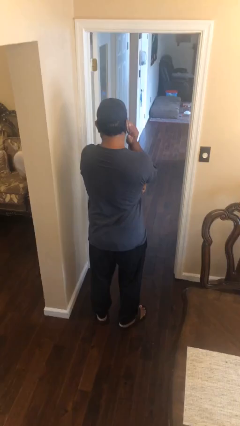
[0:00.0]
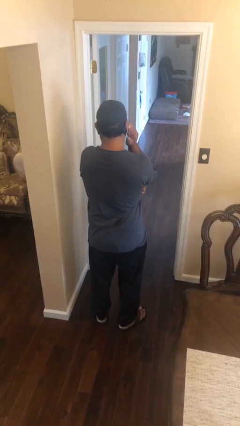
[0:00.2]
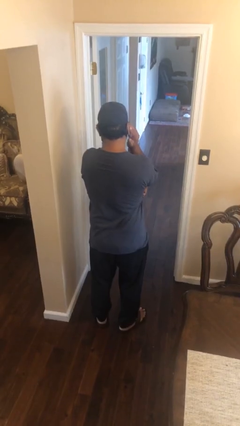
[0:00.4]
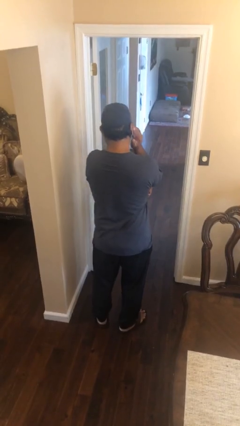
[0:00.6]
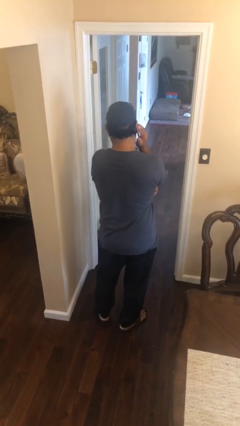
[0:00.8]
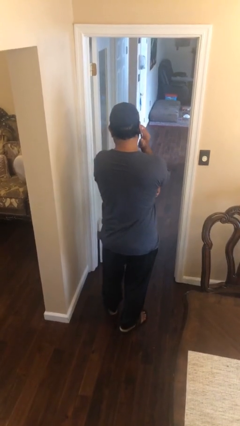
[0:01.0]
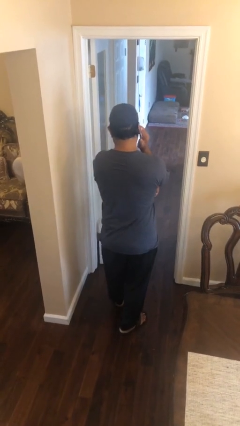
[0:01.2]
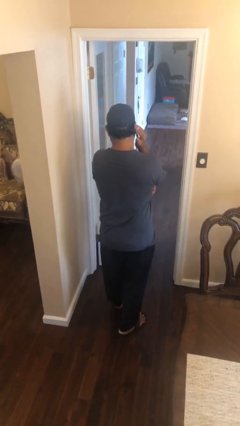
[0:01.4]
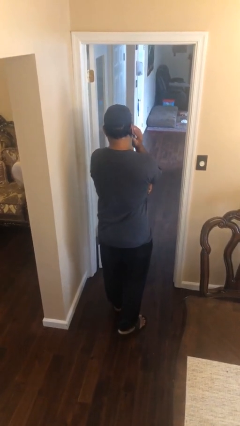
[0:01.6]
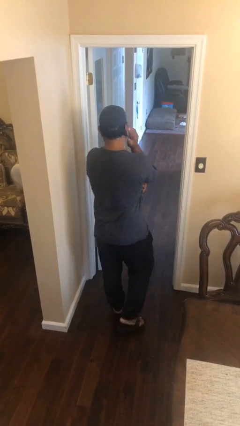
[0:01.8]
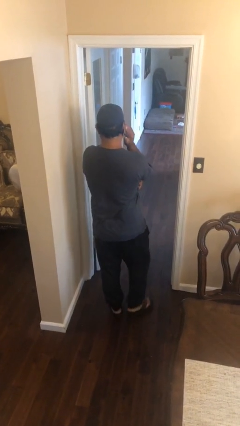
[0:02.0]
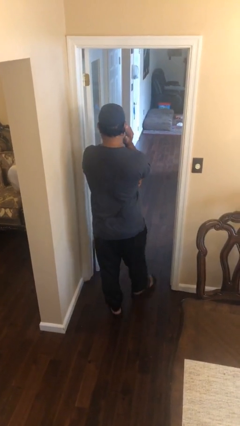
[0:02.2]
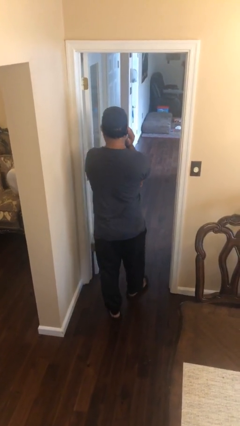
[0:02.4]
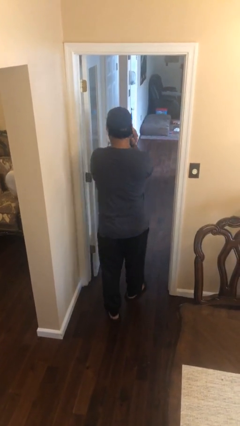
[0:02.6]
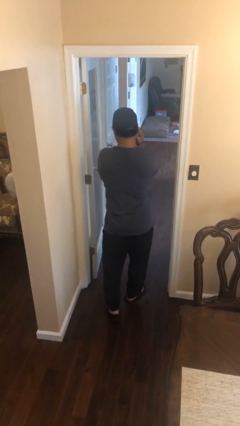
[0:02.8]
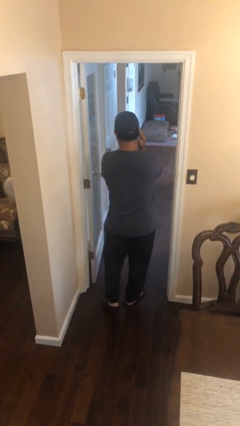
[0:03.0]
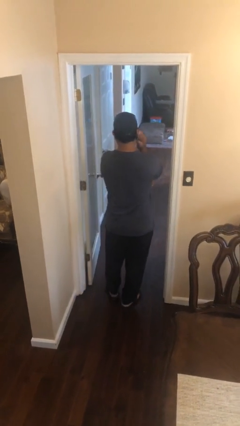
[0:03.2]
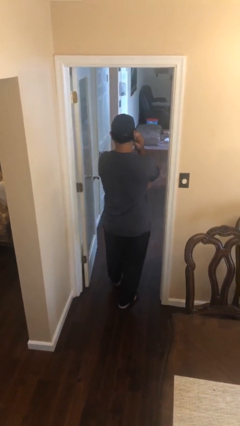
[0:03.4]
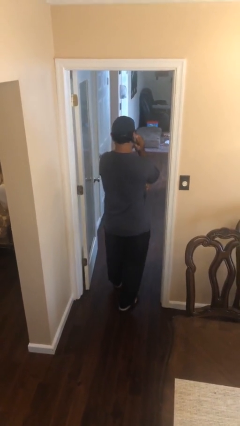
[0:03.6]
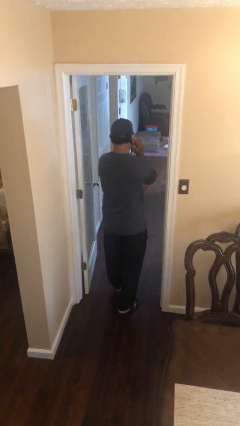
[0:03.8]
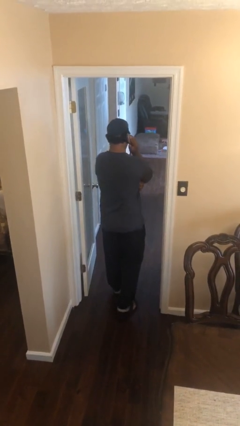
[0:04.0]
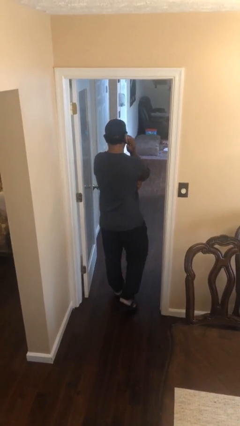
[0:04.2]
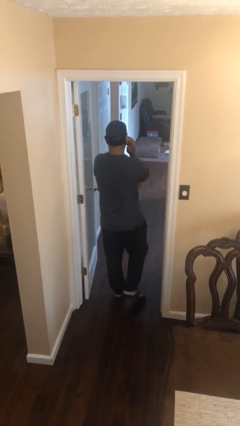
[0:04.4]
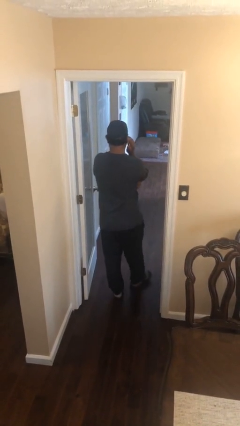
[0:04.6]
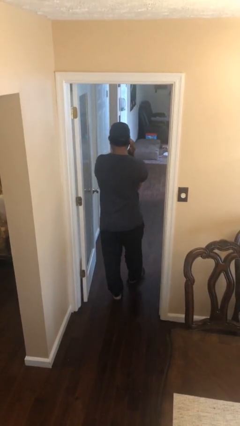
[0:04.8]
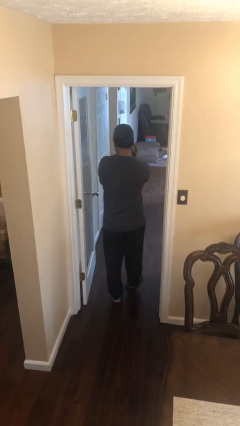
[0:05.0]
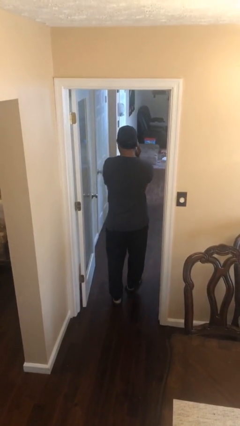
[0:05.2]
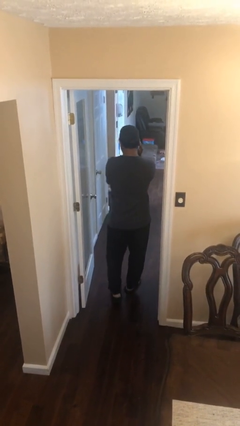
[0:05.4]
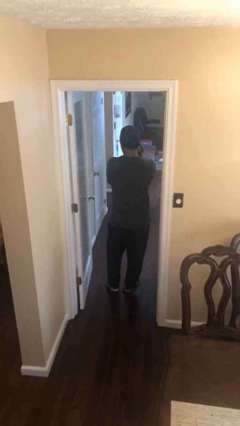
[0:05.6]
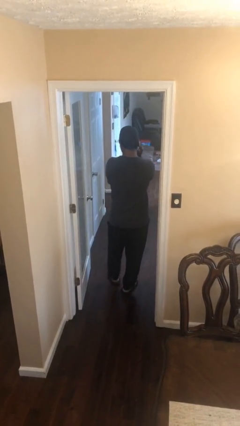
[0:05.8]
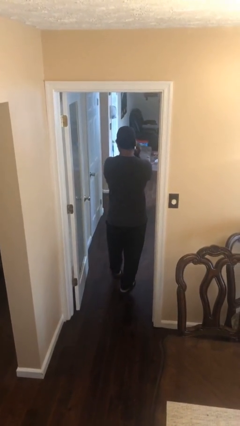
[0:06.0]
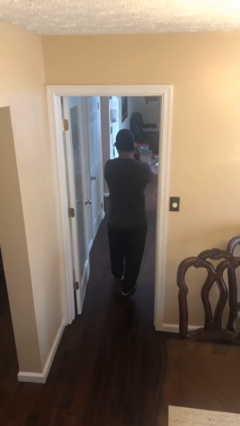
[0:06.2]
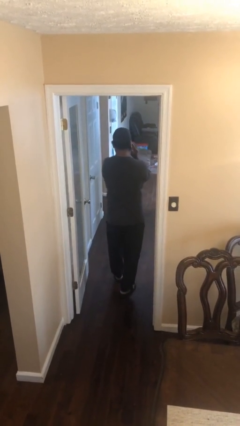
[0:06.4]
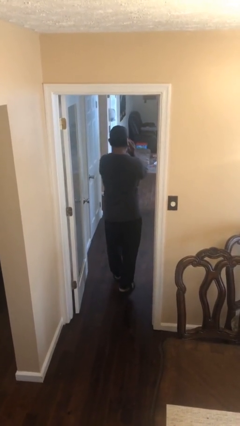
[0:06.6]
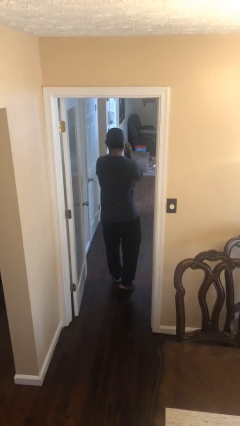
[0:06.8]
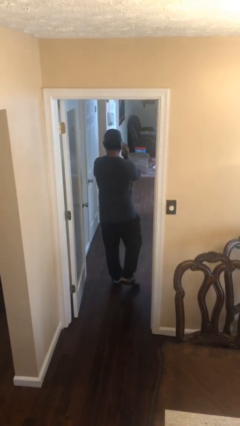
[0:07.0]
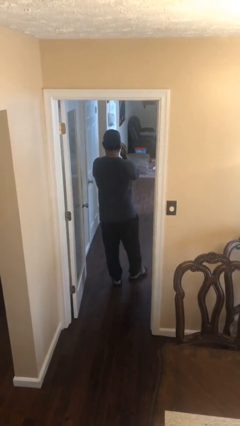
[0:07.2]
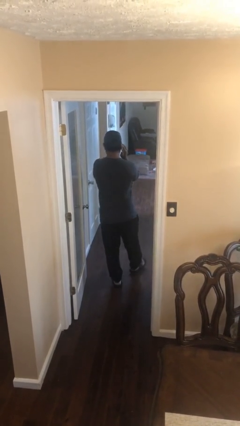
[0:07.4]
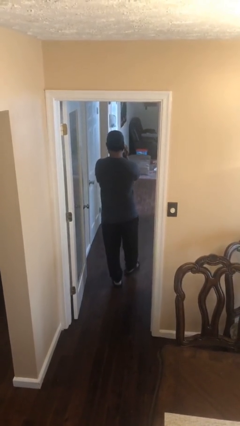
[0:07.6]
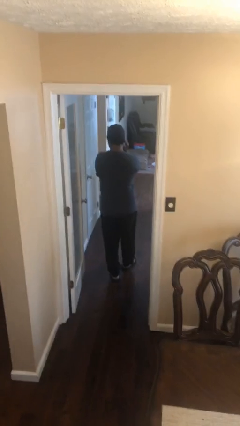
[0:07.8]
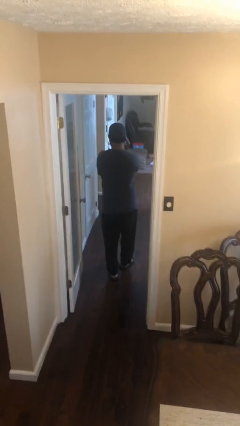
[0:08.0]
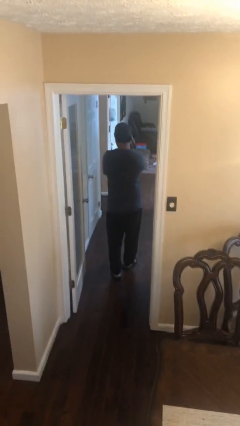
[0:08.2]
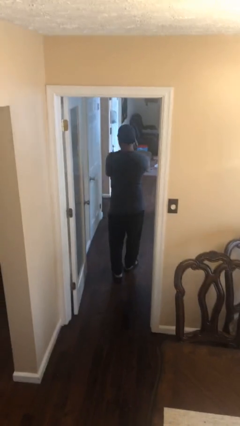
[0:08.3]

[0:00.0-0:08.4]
person exits scene through structure

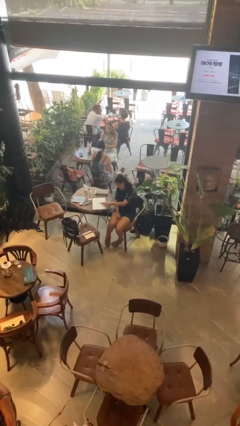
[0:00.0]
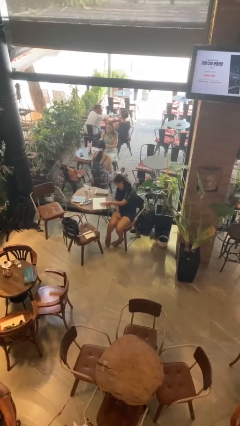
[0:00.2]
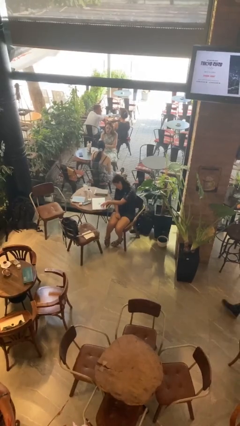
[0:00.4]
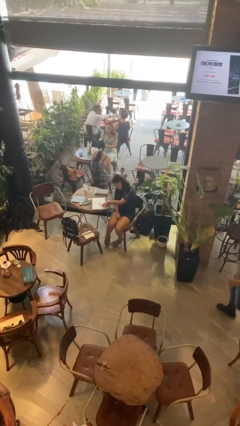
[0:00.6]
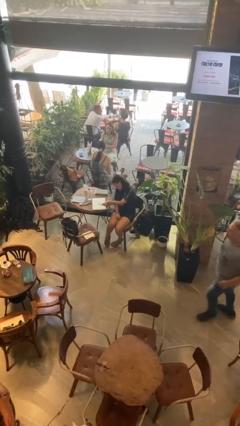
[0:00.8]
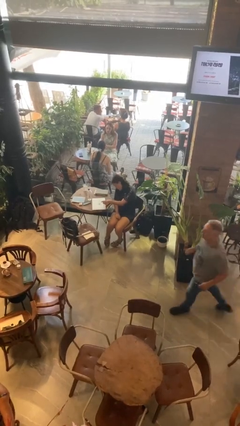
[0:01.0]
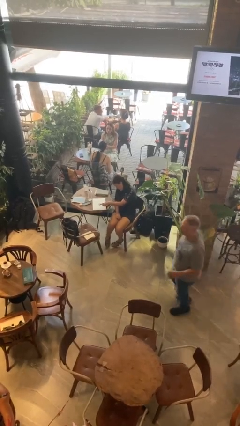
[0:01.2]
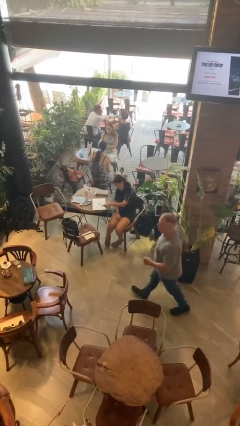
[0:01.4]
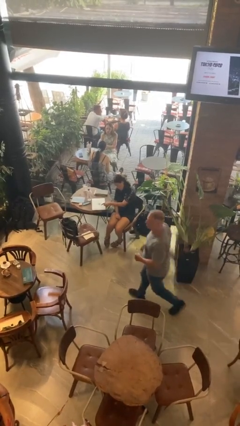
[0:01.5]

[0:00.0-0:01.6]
person taps object with finger

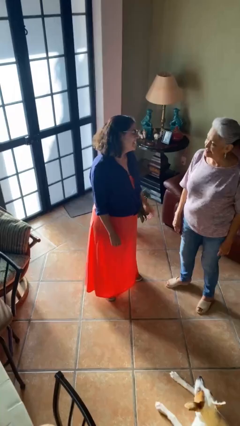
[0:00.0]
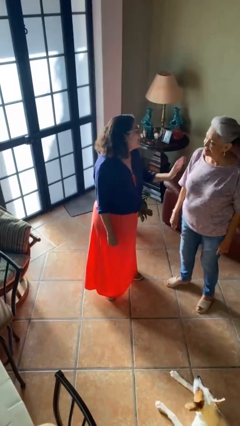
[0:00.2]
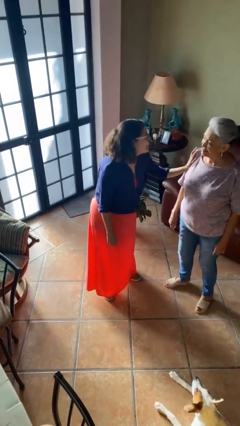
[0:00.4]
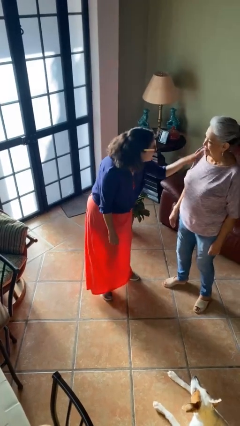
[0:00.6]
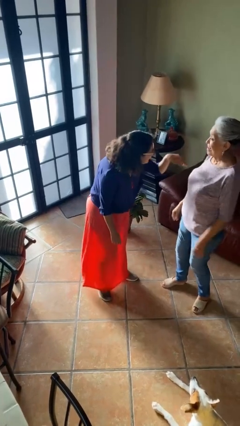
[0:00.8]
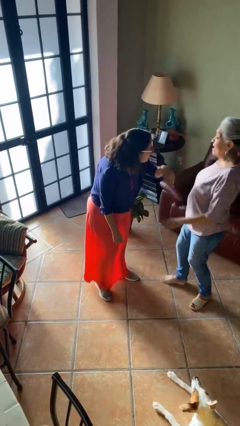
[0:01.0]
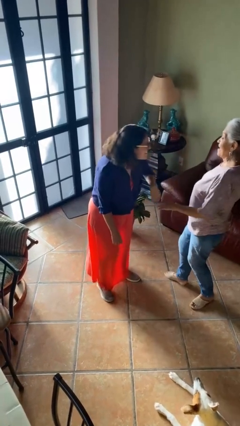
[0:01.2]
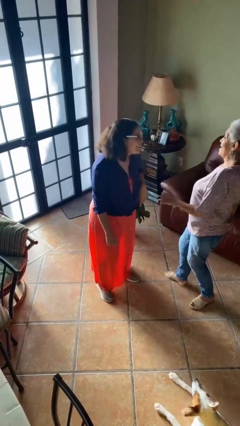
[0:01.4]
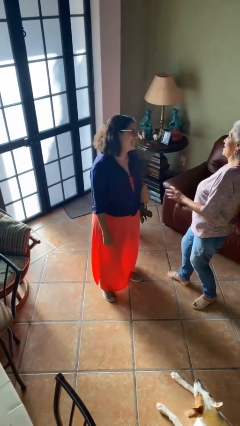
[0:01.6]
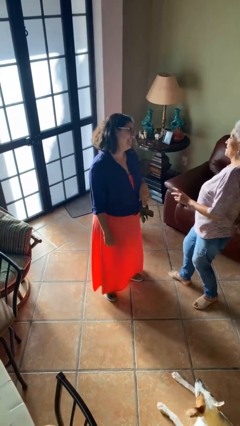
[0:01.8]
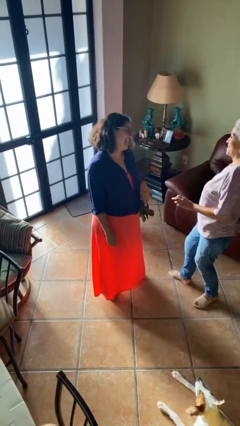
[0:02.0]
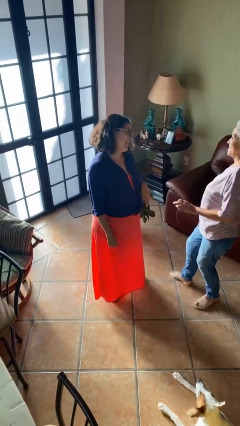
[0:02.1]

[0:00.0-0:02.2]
person shoves person

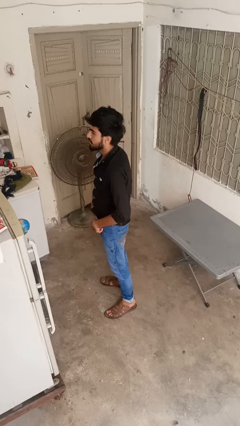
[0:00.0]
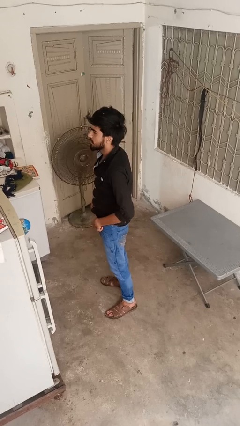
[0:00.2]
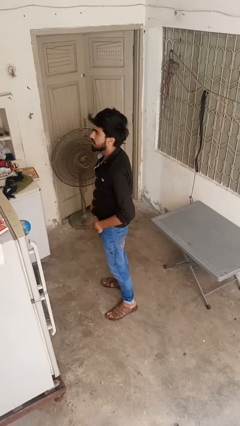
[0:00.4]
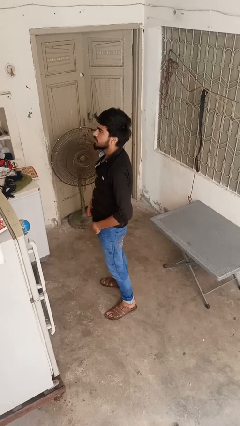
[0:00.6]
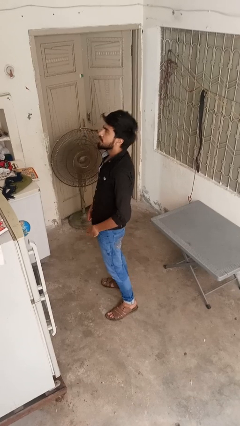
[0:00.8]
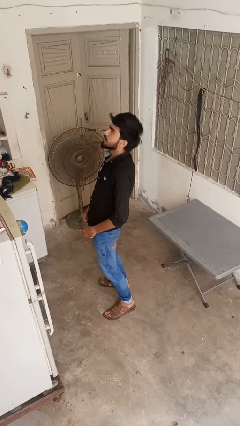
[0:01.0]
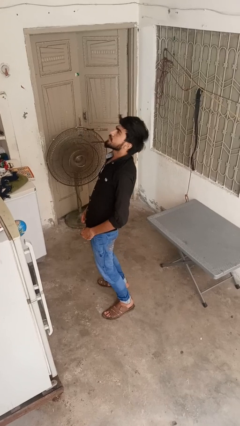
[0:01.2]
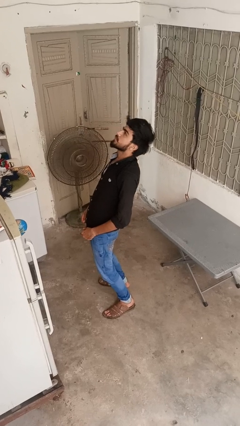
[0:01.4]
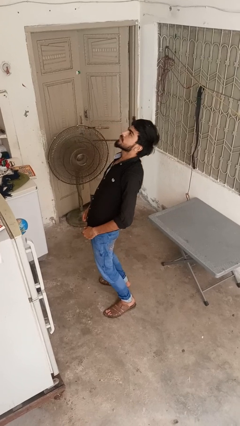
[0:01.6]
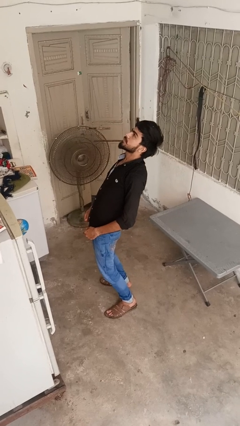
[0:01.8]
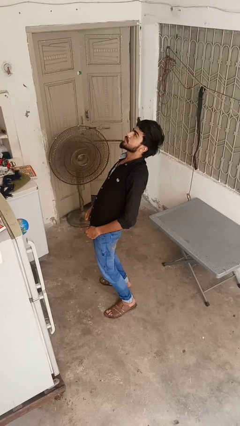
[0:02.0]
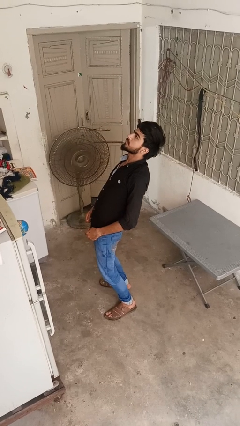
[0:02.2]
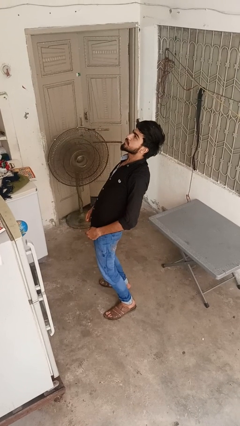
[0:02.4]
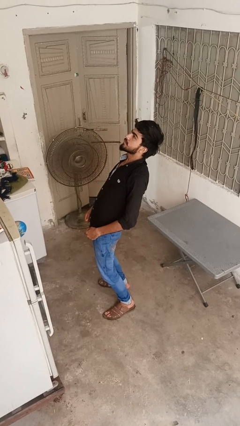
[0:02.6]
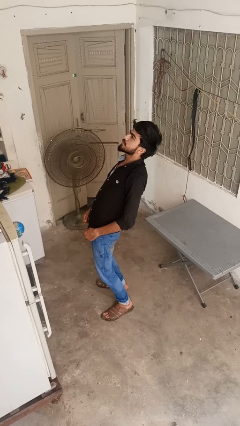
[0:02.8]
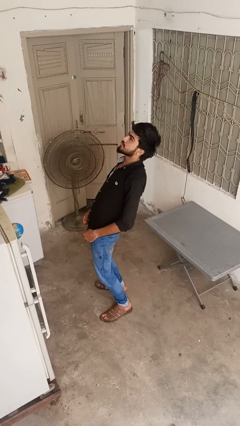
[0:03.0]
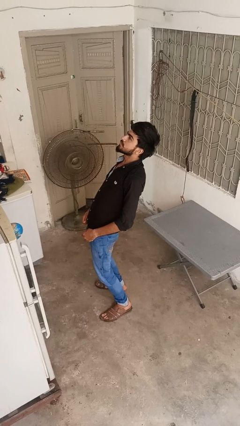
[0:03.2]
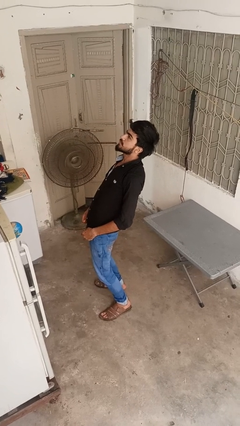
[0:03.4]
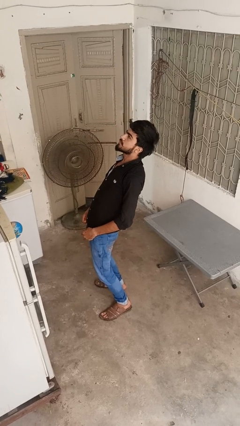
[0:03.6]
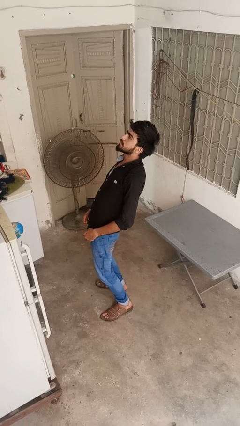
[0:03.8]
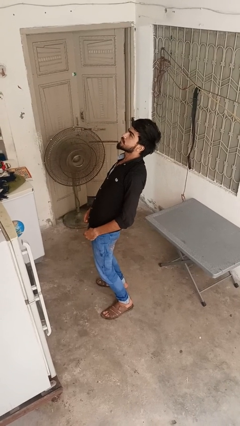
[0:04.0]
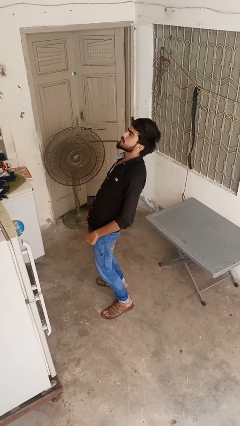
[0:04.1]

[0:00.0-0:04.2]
person stretches back

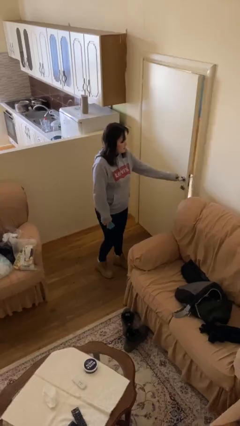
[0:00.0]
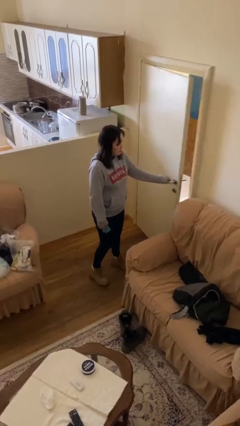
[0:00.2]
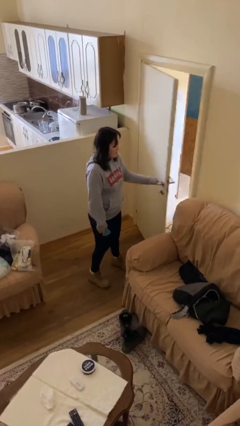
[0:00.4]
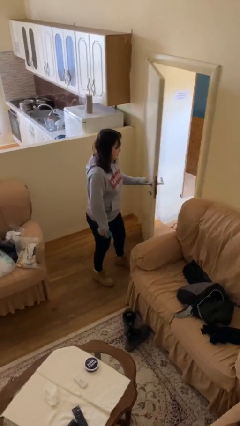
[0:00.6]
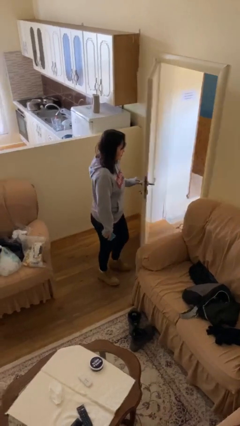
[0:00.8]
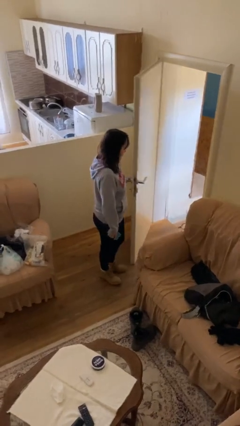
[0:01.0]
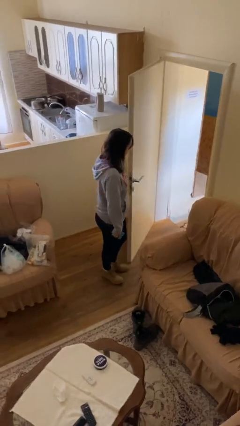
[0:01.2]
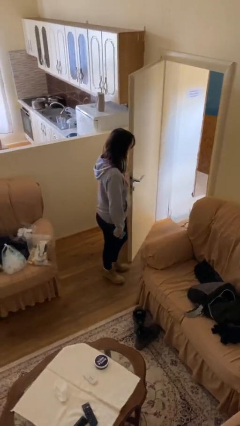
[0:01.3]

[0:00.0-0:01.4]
person opens facility door
